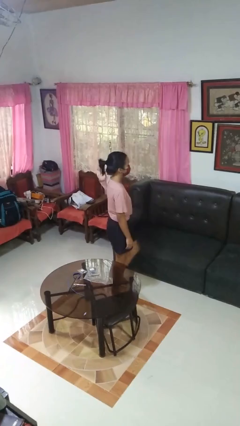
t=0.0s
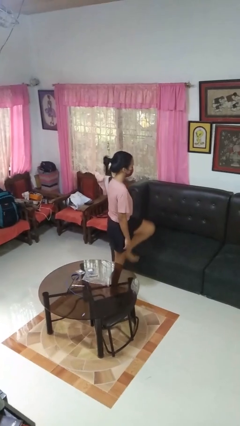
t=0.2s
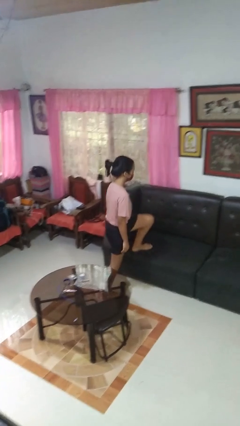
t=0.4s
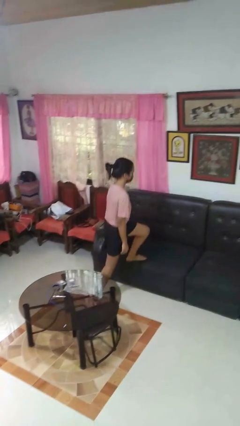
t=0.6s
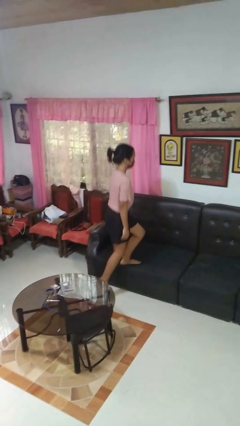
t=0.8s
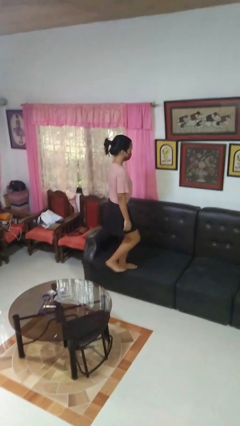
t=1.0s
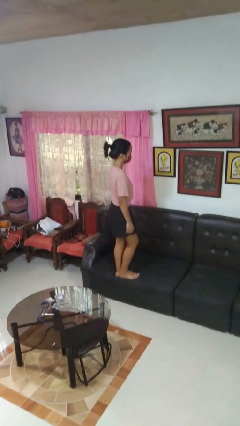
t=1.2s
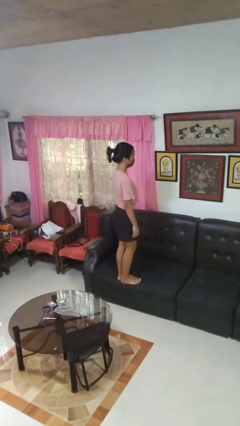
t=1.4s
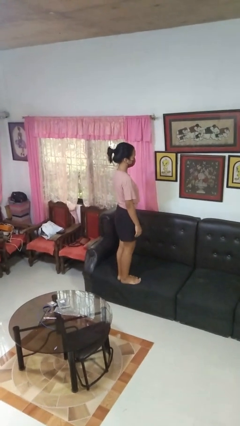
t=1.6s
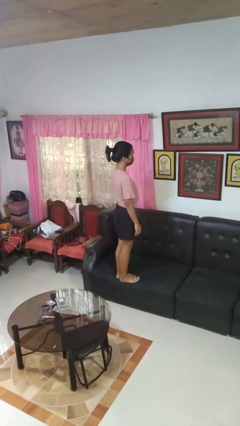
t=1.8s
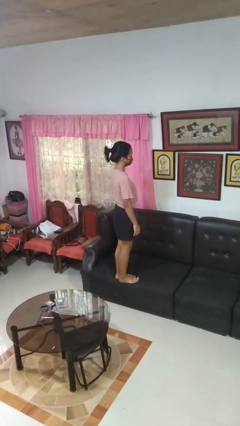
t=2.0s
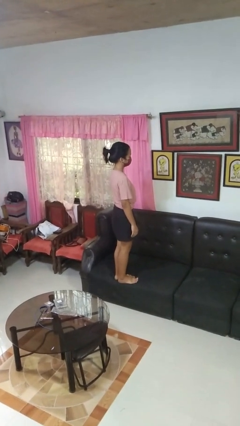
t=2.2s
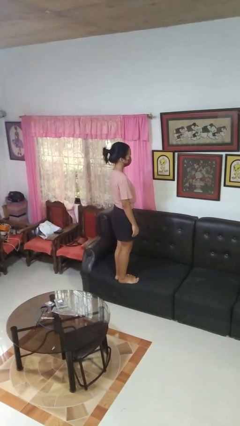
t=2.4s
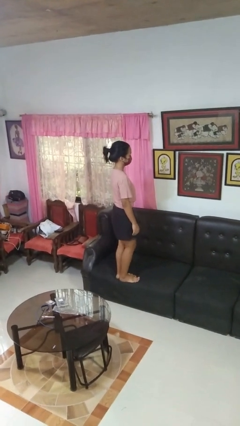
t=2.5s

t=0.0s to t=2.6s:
person climbs on couch

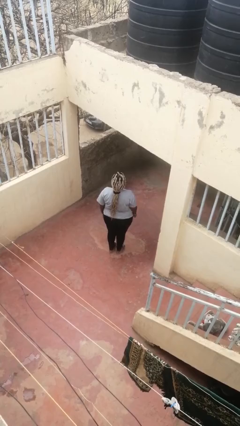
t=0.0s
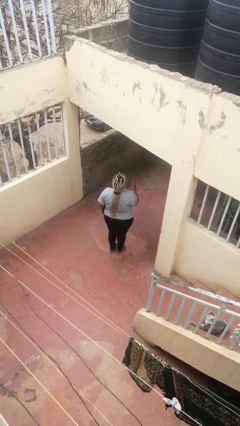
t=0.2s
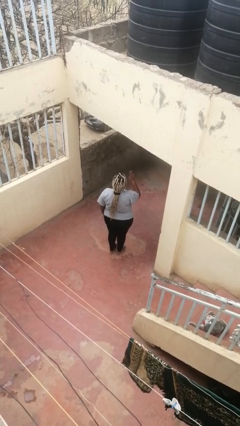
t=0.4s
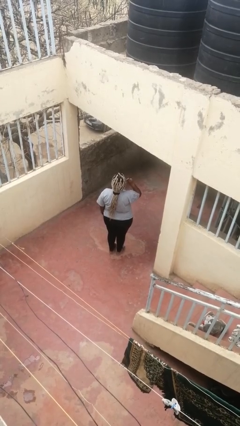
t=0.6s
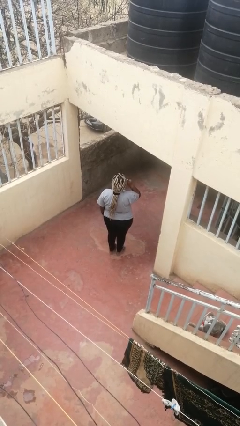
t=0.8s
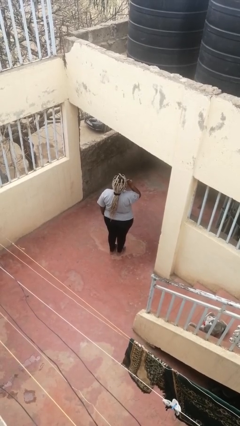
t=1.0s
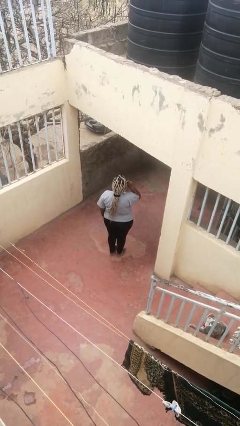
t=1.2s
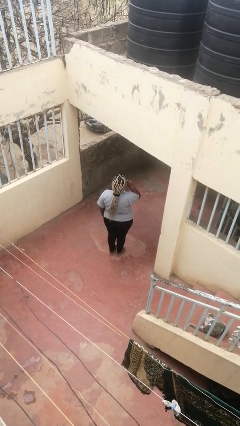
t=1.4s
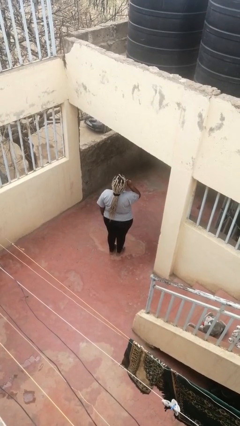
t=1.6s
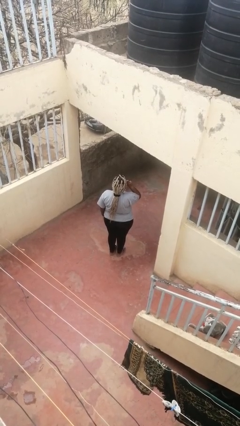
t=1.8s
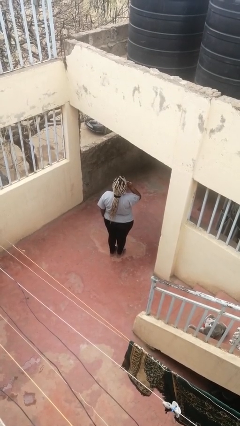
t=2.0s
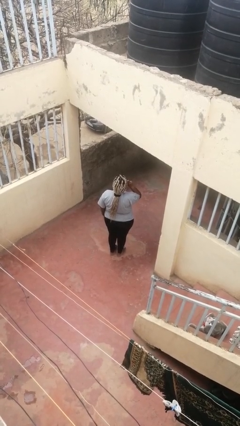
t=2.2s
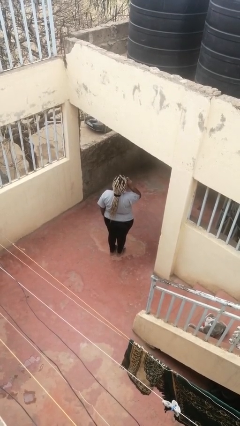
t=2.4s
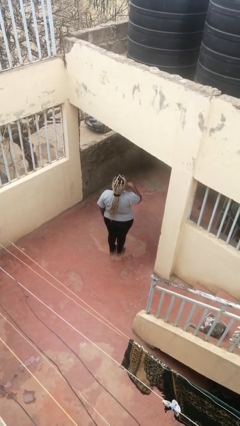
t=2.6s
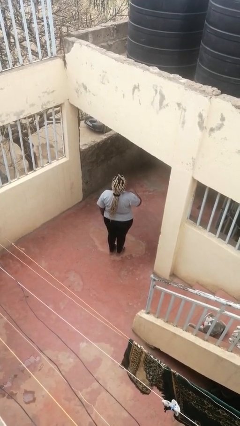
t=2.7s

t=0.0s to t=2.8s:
person salutes

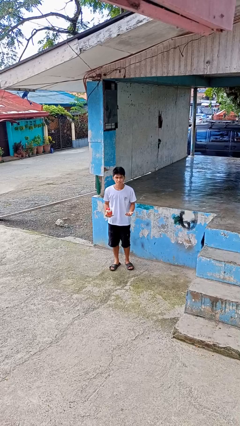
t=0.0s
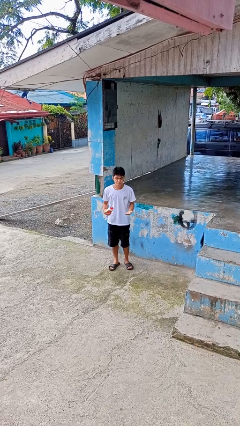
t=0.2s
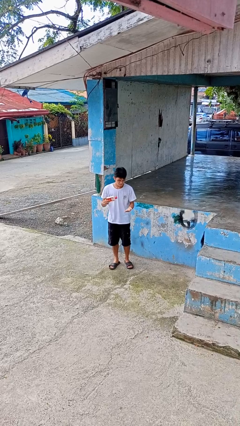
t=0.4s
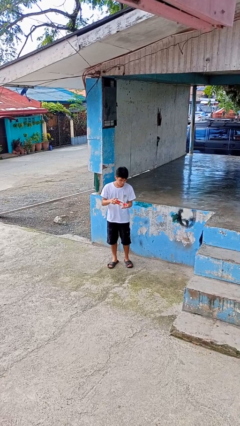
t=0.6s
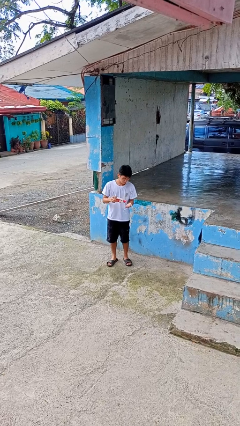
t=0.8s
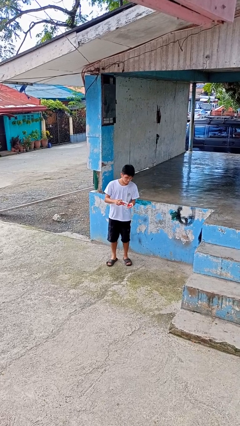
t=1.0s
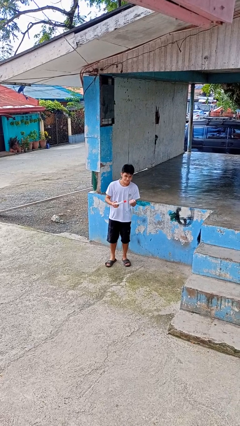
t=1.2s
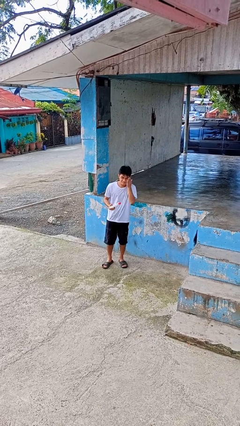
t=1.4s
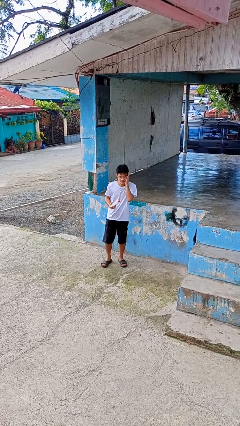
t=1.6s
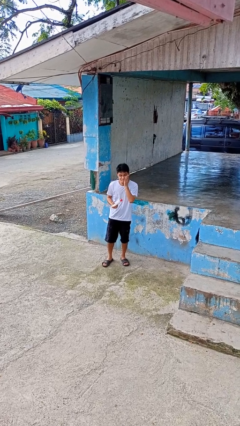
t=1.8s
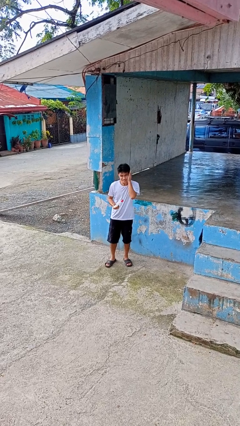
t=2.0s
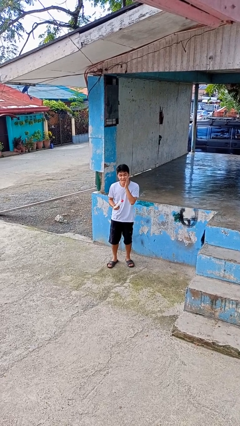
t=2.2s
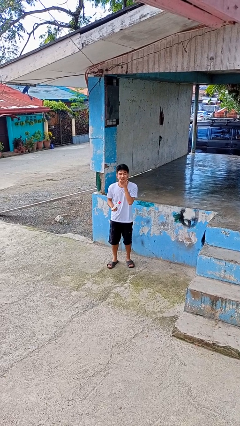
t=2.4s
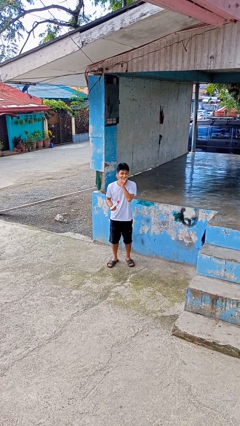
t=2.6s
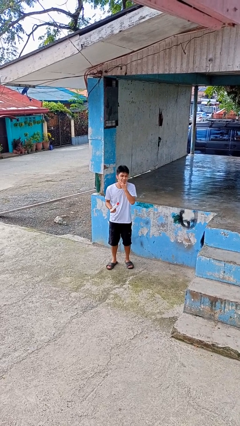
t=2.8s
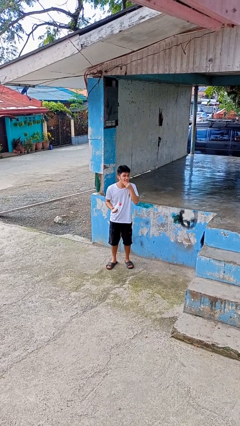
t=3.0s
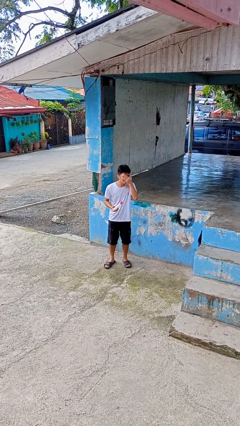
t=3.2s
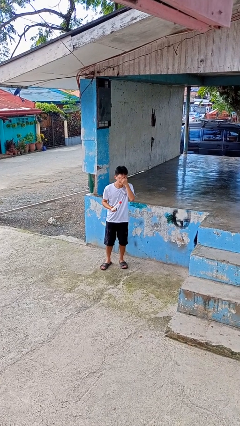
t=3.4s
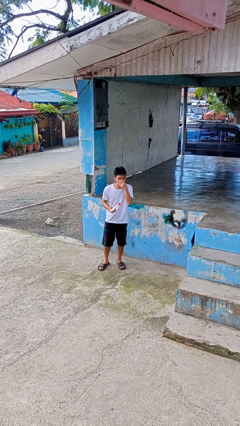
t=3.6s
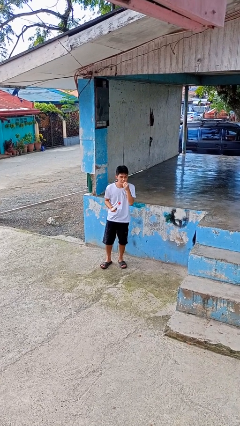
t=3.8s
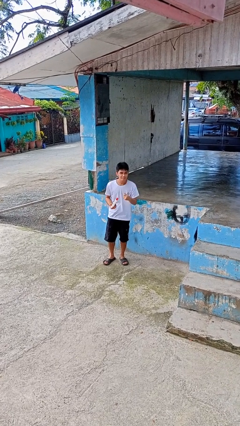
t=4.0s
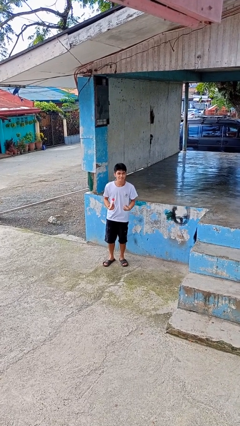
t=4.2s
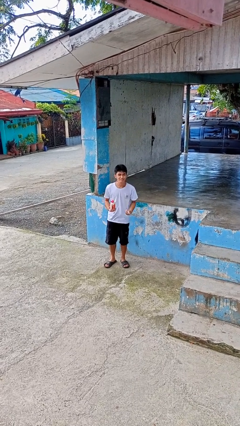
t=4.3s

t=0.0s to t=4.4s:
person applies facial moisturizer

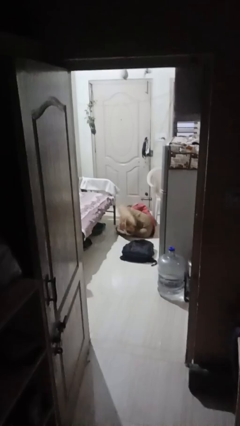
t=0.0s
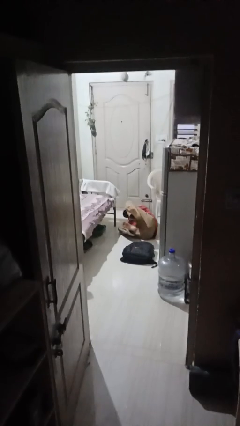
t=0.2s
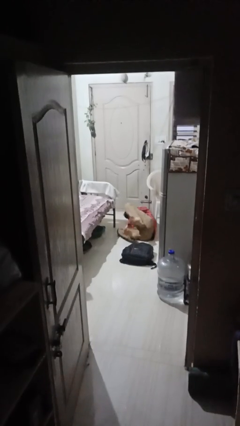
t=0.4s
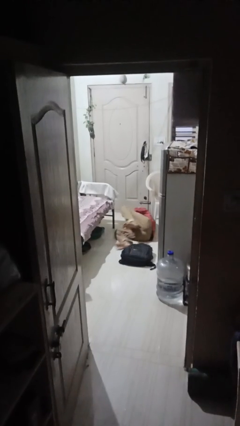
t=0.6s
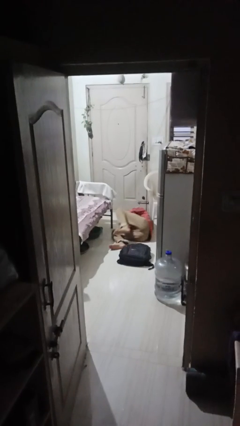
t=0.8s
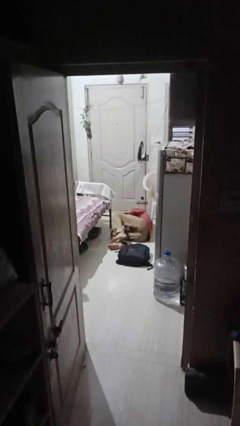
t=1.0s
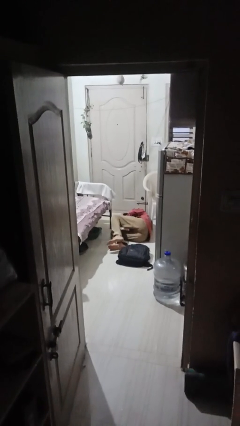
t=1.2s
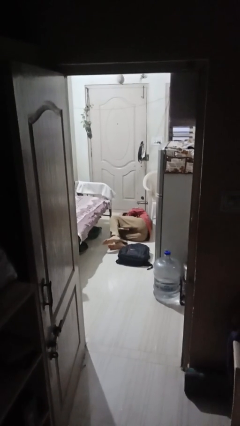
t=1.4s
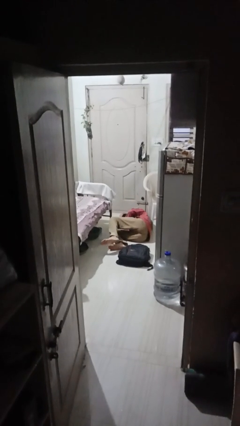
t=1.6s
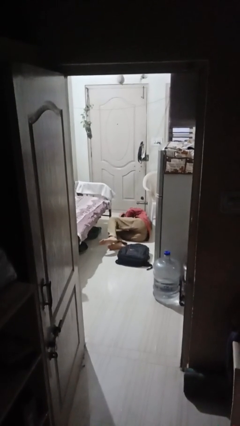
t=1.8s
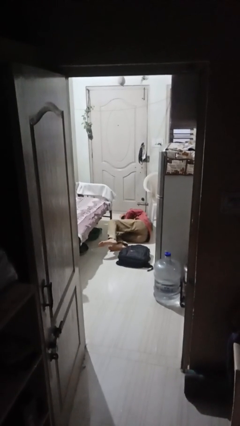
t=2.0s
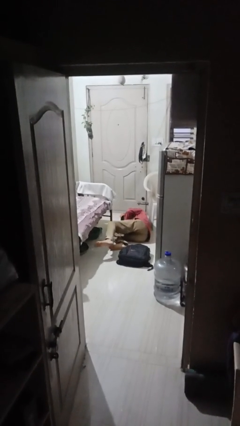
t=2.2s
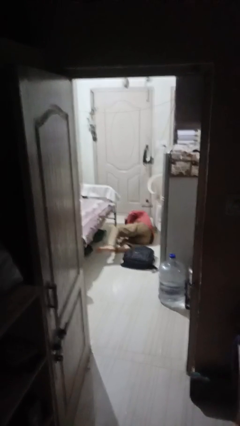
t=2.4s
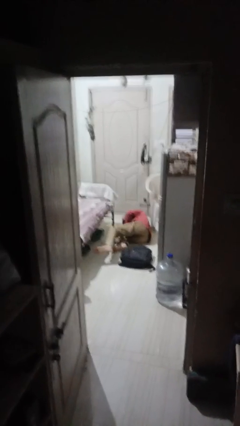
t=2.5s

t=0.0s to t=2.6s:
person lies down on floor

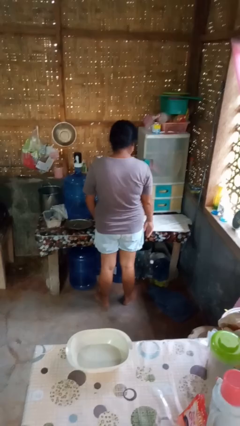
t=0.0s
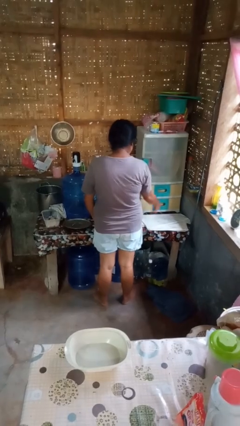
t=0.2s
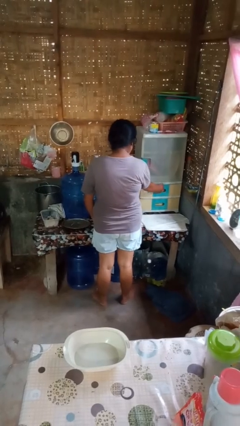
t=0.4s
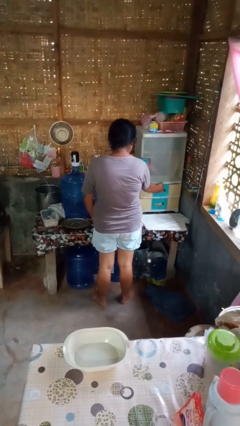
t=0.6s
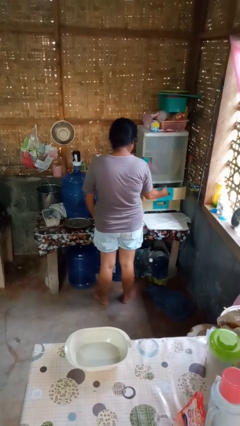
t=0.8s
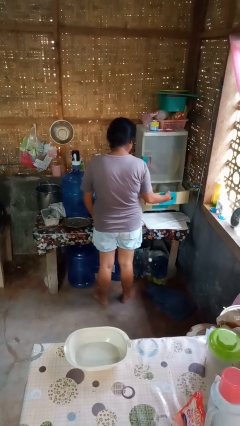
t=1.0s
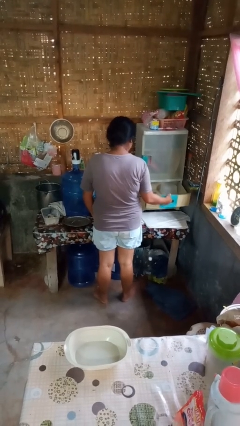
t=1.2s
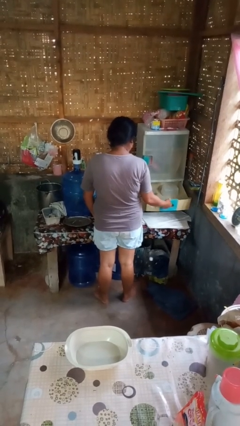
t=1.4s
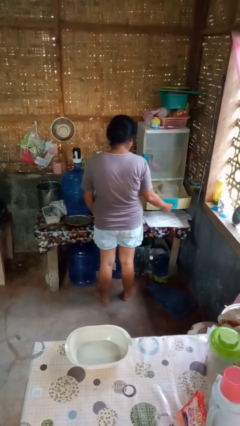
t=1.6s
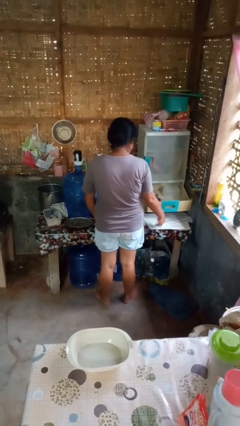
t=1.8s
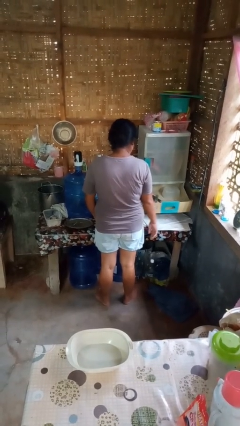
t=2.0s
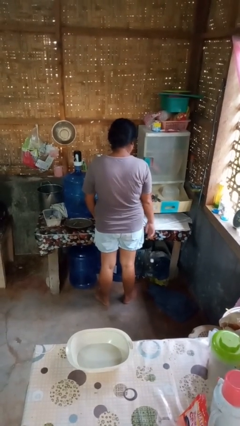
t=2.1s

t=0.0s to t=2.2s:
person opens kitchen drawer

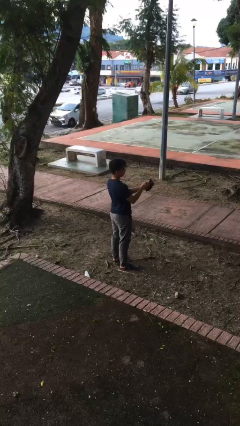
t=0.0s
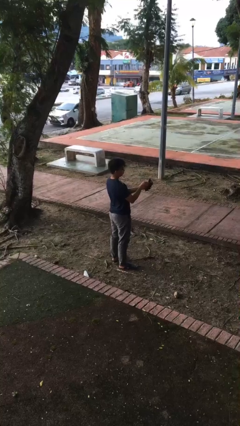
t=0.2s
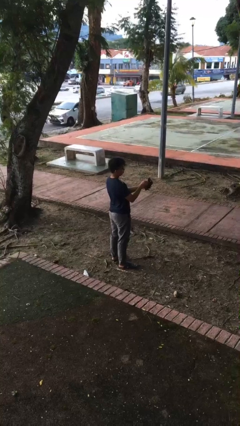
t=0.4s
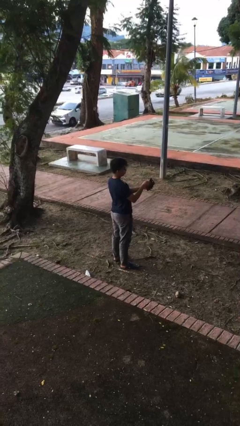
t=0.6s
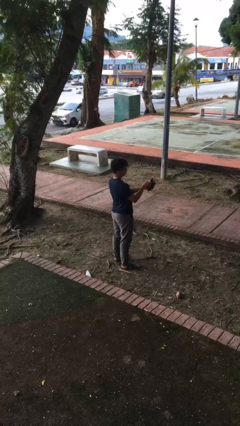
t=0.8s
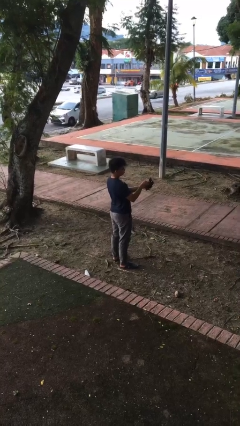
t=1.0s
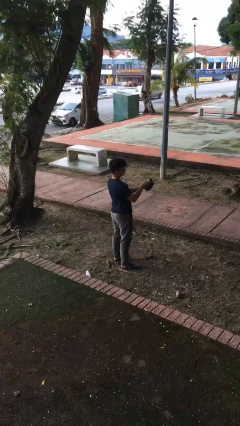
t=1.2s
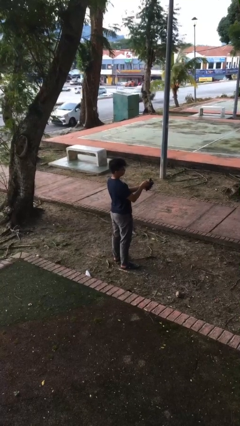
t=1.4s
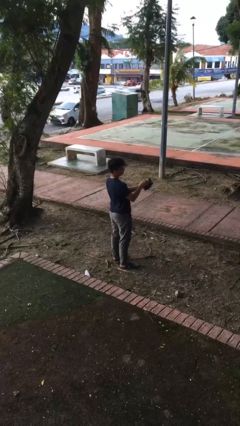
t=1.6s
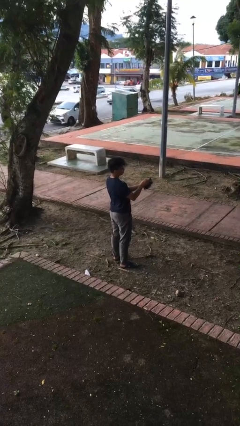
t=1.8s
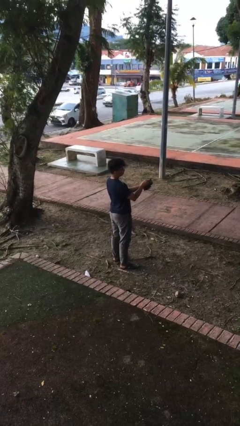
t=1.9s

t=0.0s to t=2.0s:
person searches in purse

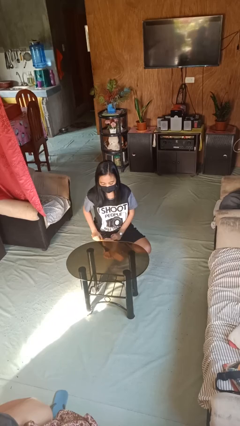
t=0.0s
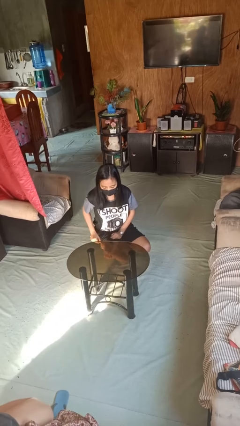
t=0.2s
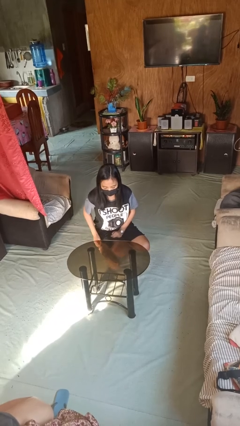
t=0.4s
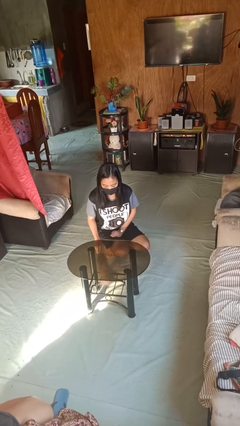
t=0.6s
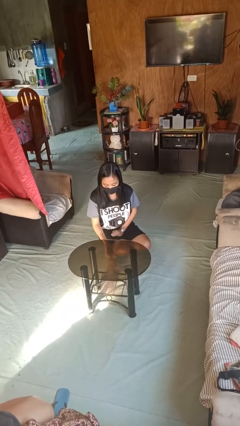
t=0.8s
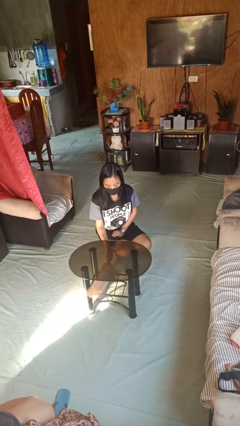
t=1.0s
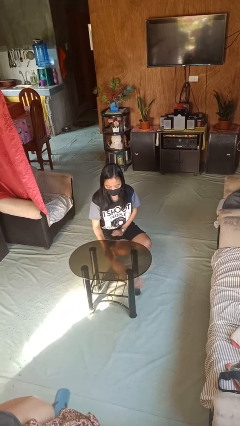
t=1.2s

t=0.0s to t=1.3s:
person dusts furniture
